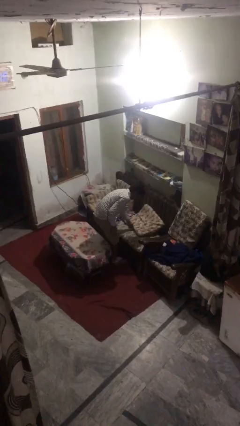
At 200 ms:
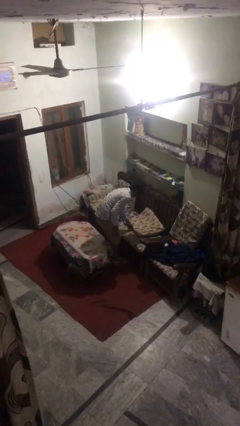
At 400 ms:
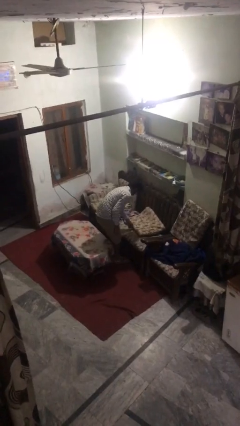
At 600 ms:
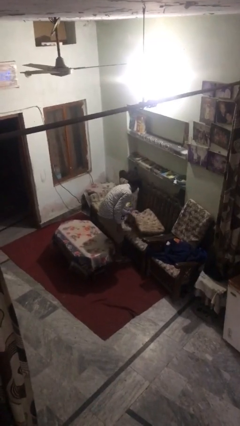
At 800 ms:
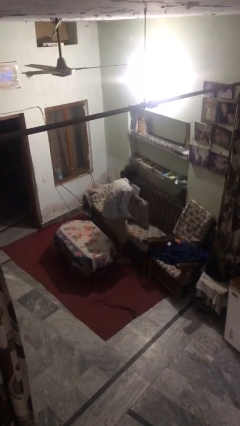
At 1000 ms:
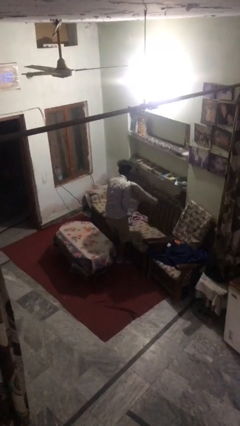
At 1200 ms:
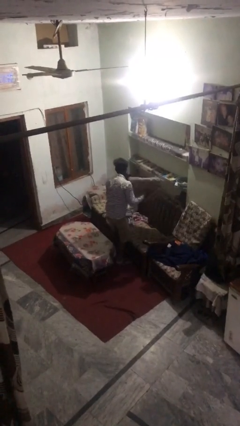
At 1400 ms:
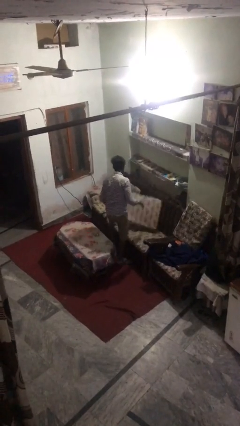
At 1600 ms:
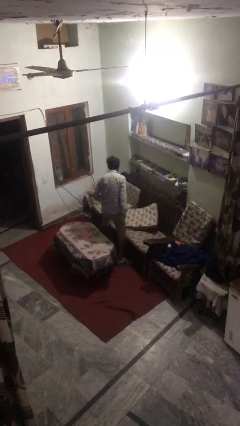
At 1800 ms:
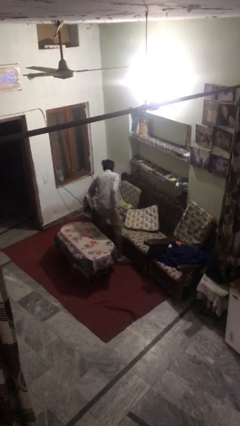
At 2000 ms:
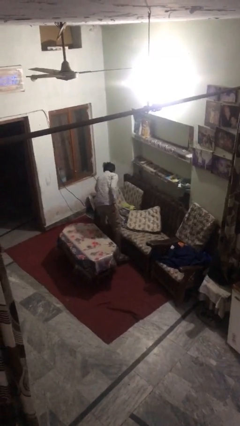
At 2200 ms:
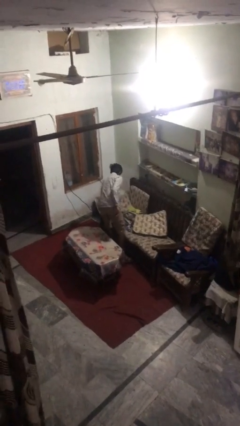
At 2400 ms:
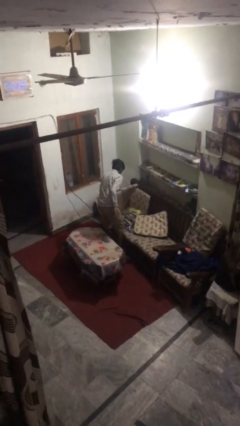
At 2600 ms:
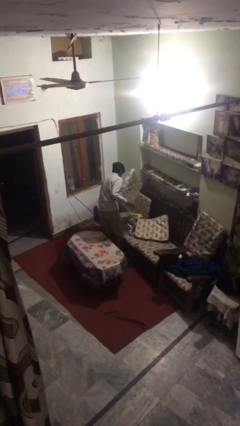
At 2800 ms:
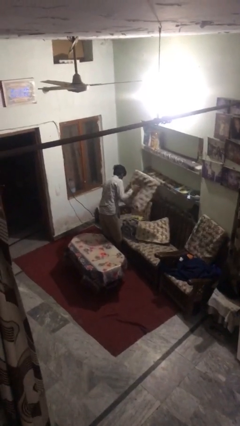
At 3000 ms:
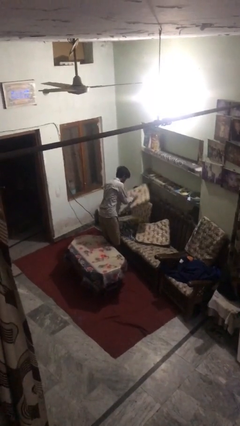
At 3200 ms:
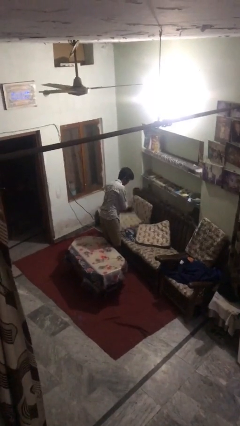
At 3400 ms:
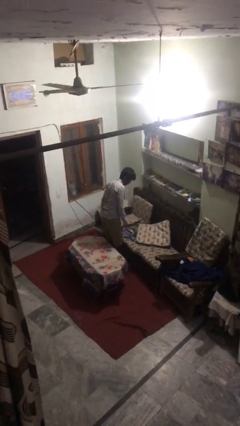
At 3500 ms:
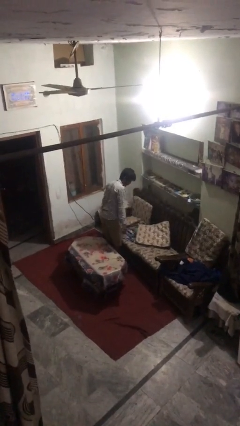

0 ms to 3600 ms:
person searches in couch

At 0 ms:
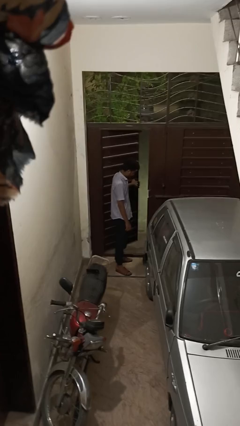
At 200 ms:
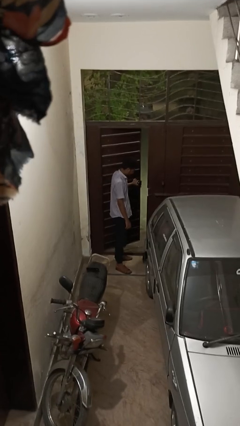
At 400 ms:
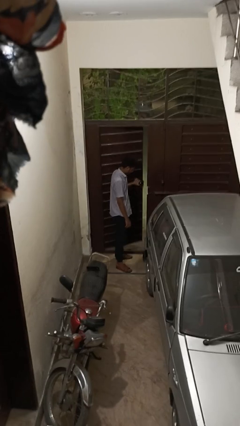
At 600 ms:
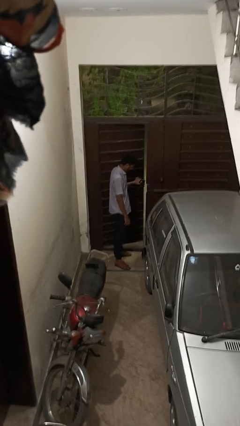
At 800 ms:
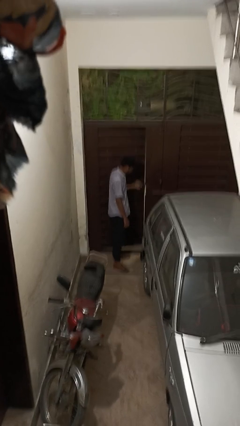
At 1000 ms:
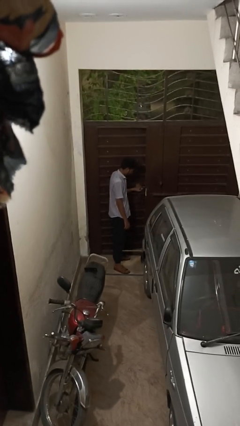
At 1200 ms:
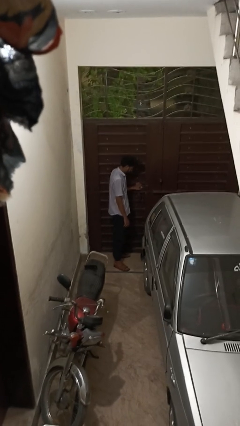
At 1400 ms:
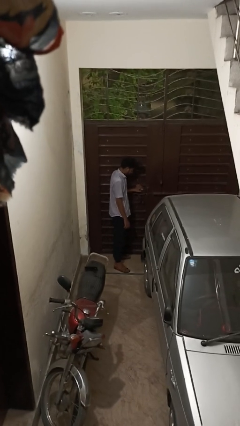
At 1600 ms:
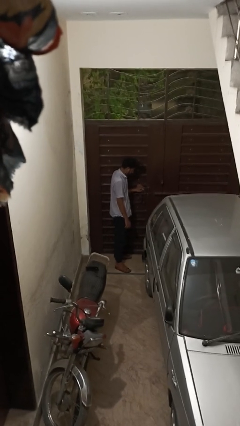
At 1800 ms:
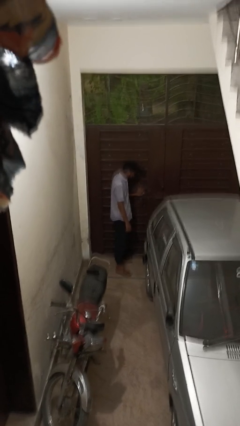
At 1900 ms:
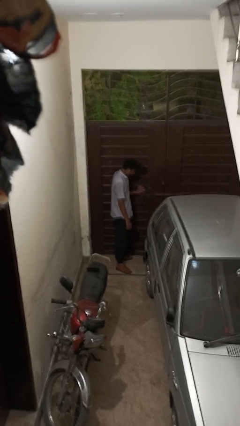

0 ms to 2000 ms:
person closes gate

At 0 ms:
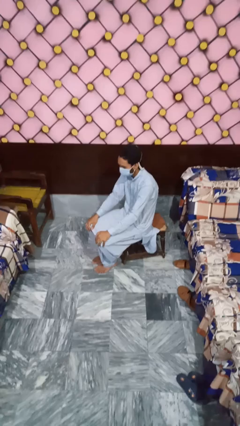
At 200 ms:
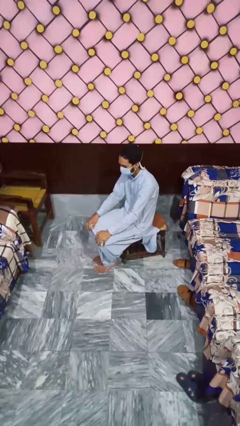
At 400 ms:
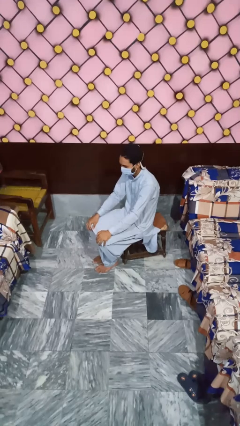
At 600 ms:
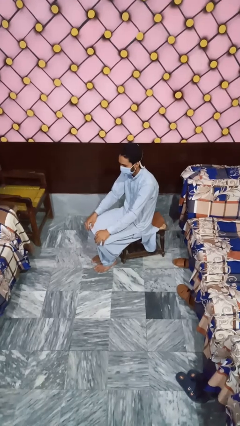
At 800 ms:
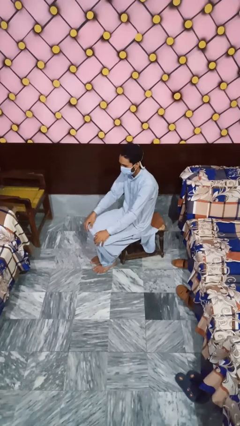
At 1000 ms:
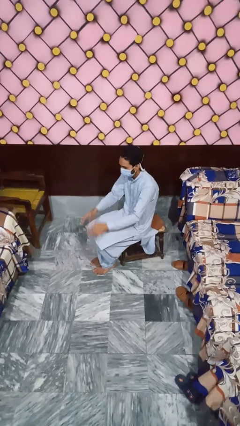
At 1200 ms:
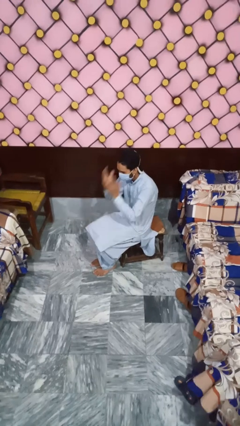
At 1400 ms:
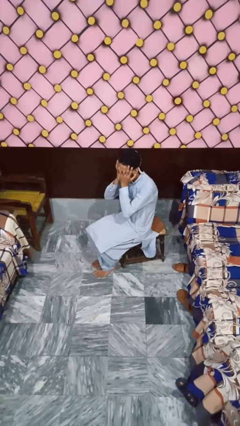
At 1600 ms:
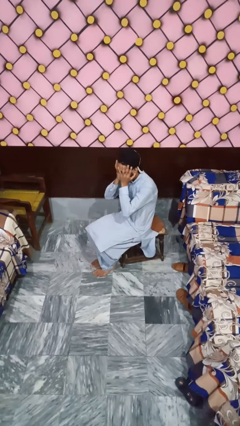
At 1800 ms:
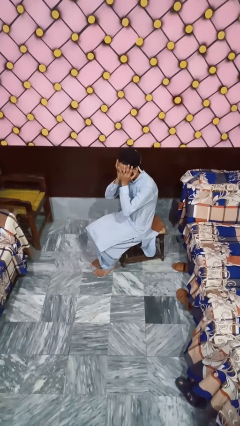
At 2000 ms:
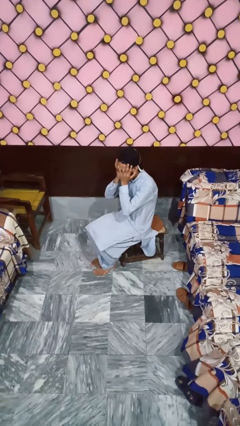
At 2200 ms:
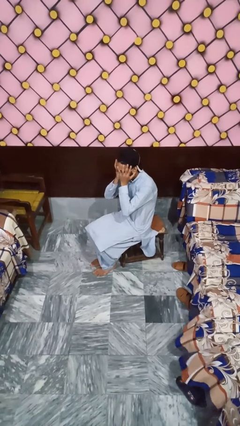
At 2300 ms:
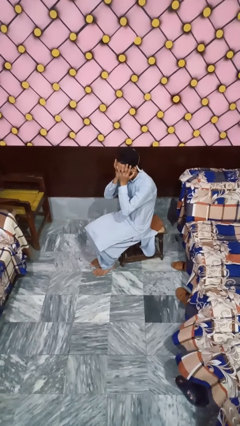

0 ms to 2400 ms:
person covers face with hands

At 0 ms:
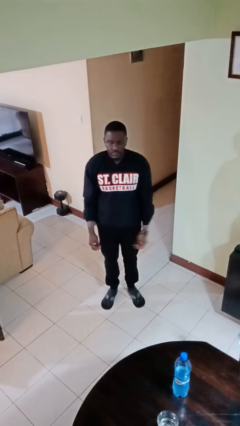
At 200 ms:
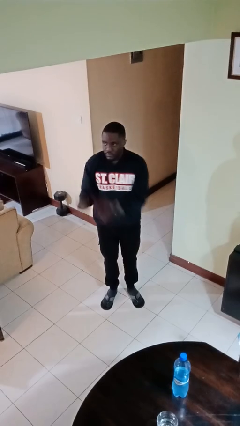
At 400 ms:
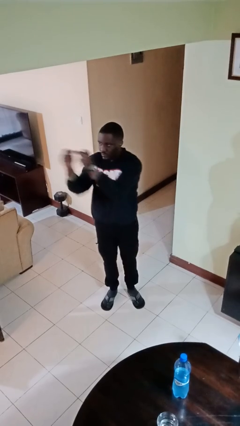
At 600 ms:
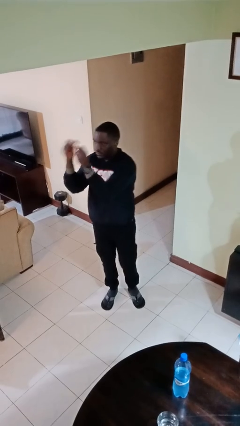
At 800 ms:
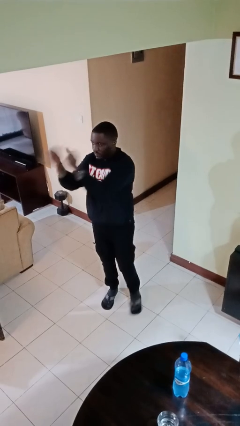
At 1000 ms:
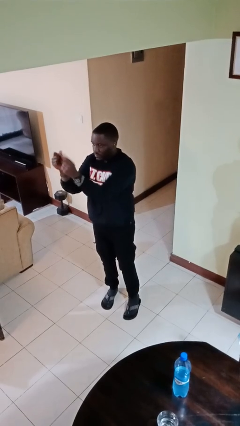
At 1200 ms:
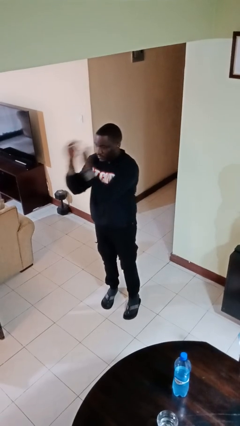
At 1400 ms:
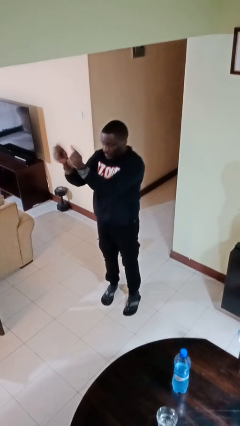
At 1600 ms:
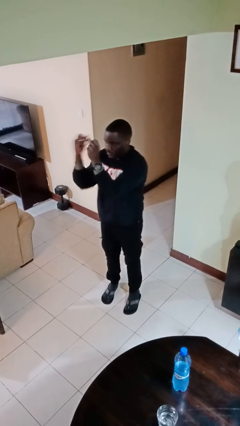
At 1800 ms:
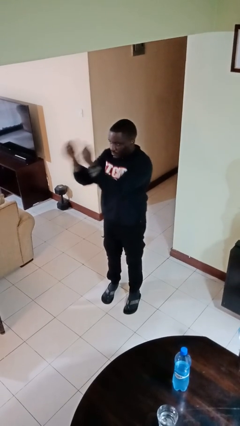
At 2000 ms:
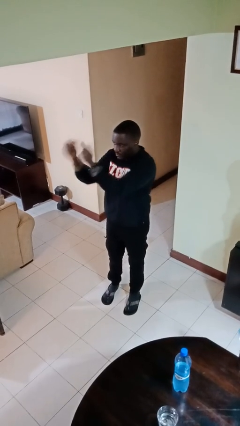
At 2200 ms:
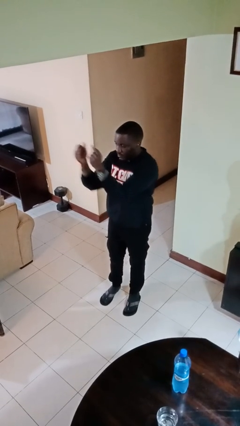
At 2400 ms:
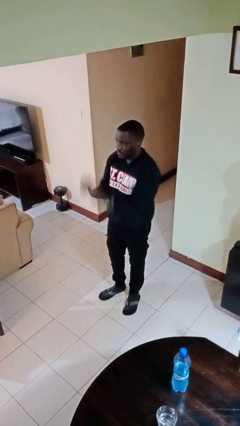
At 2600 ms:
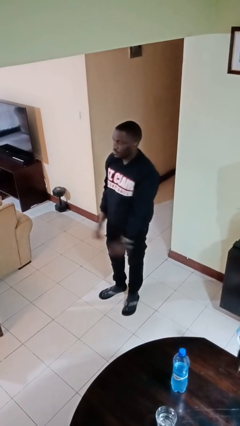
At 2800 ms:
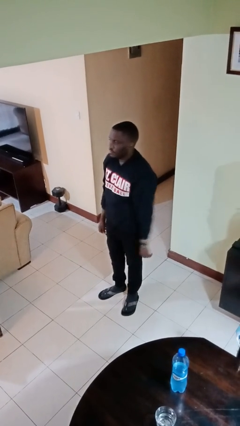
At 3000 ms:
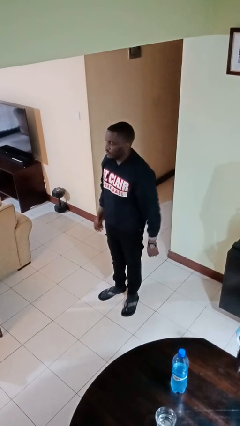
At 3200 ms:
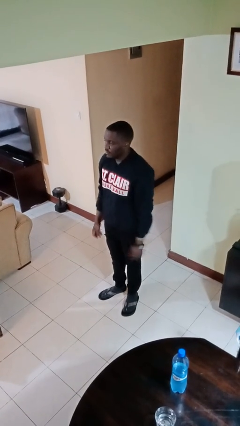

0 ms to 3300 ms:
person snaps fingers

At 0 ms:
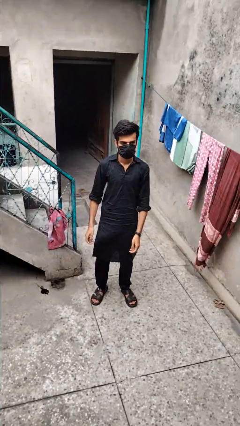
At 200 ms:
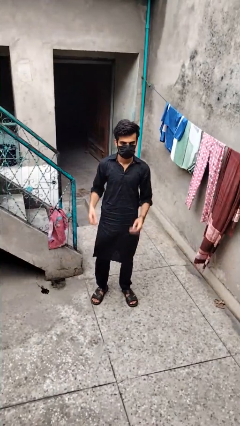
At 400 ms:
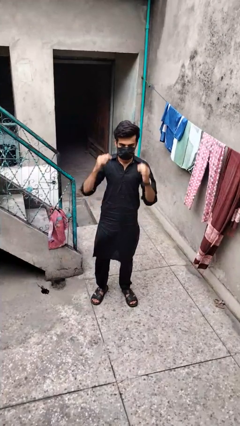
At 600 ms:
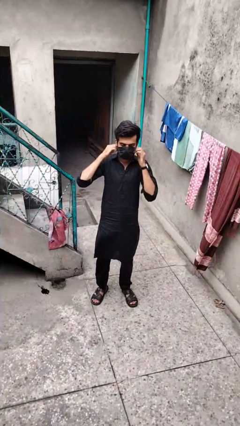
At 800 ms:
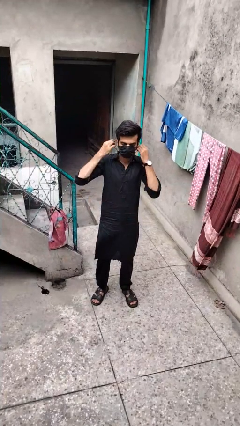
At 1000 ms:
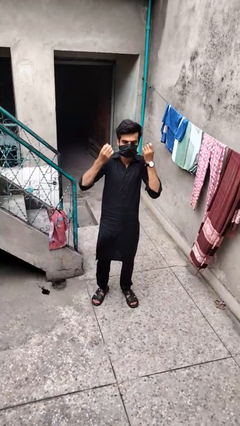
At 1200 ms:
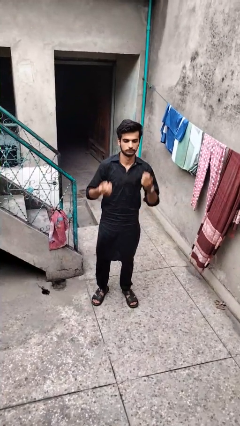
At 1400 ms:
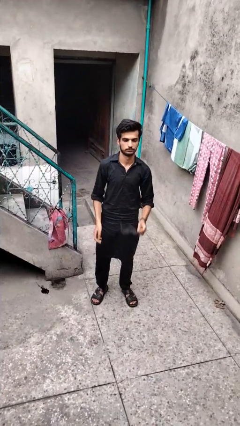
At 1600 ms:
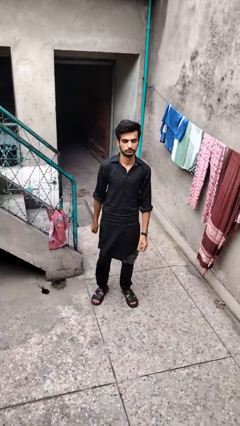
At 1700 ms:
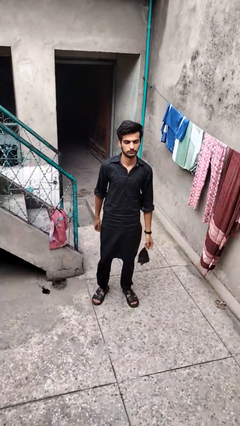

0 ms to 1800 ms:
person takes off facemask

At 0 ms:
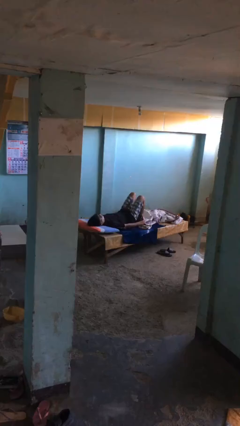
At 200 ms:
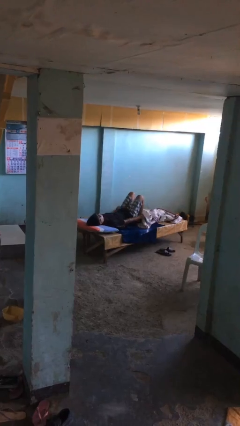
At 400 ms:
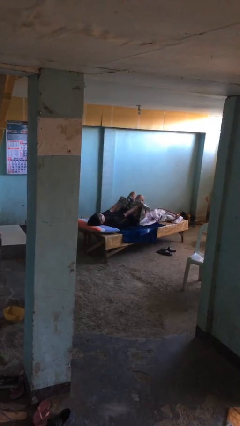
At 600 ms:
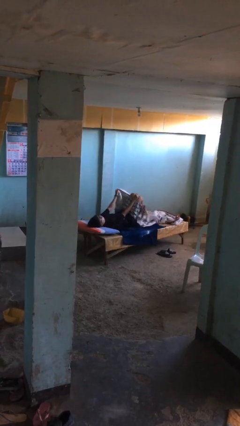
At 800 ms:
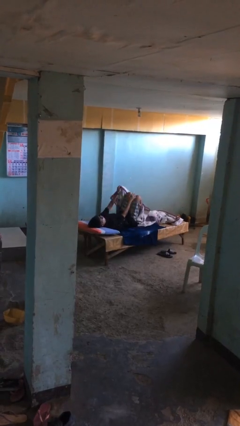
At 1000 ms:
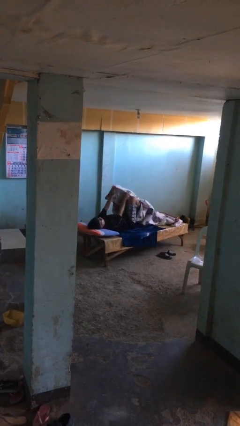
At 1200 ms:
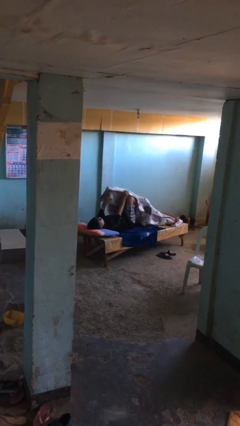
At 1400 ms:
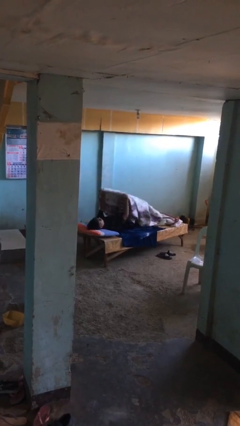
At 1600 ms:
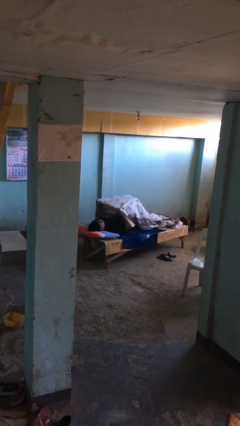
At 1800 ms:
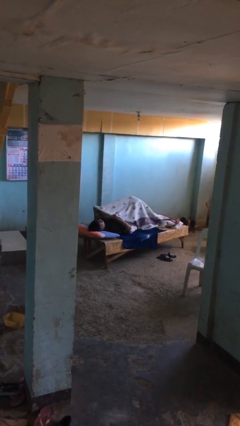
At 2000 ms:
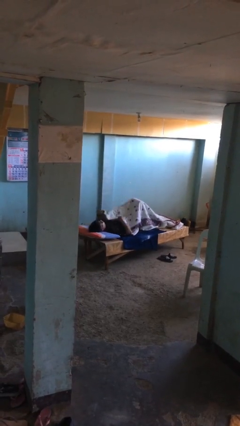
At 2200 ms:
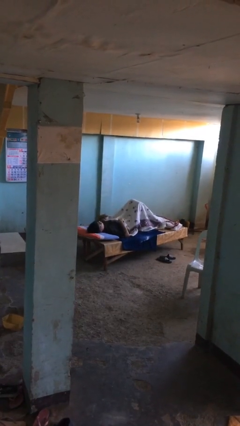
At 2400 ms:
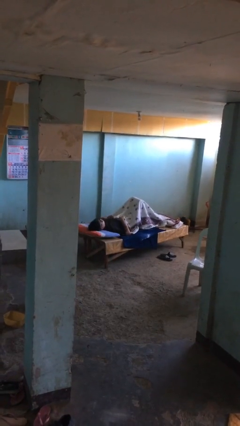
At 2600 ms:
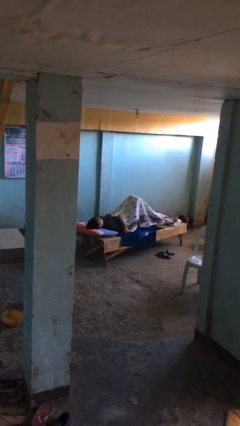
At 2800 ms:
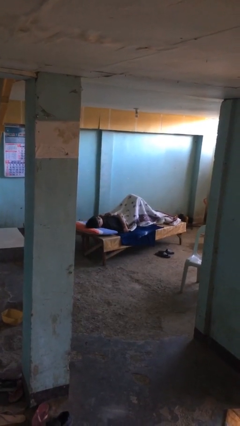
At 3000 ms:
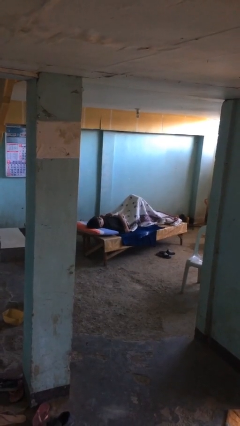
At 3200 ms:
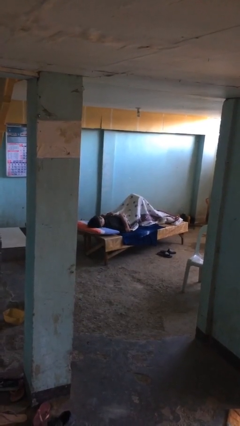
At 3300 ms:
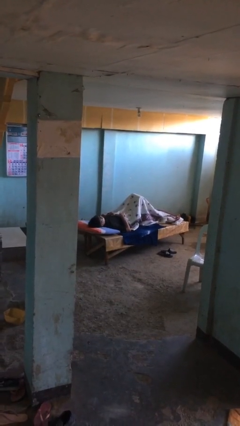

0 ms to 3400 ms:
person covers with bedsheets

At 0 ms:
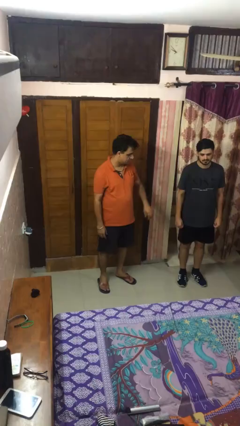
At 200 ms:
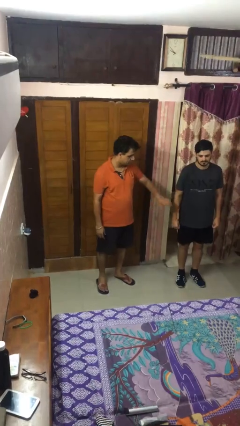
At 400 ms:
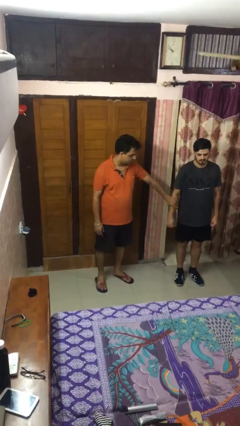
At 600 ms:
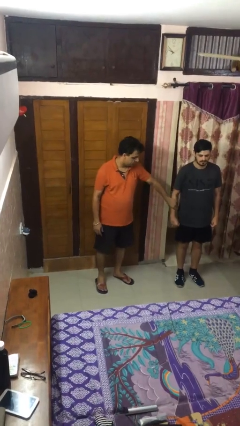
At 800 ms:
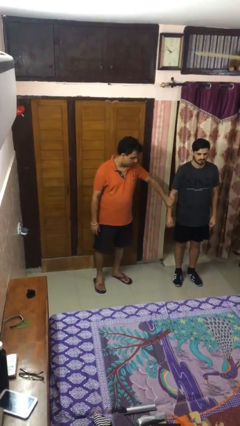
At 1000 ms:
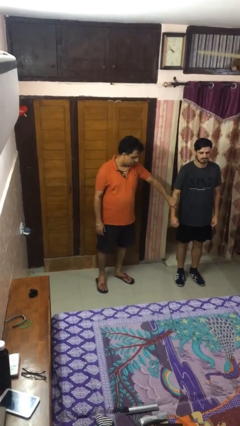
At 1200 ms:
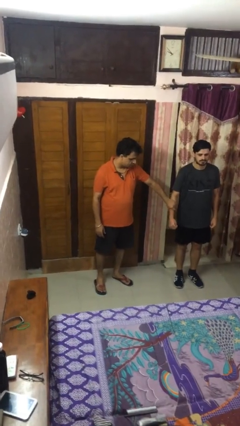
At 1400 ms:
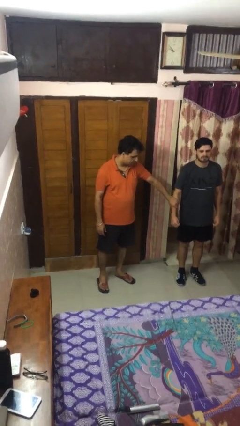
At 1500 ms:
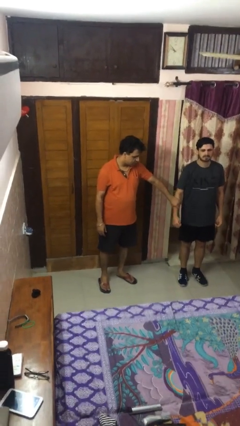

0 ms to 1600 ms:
person grabs person by forearm
